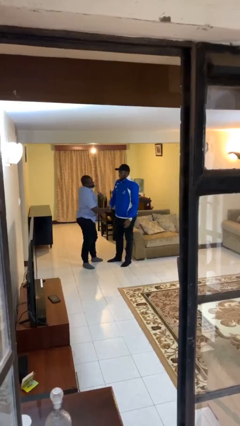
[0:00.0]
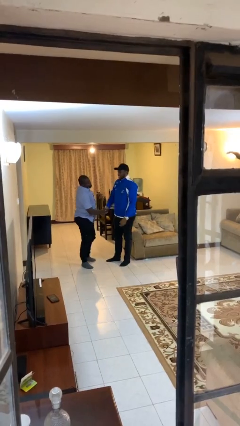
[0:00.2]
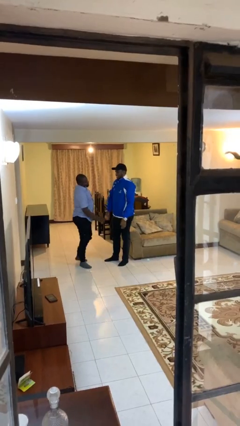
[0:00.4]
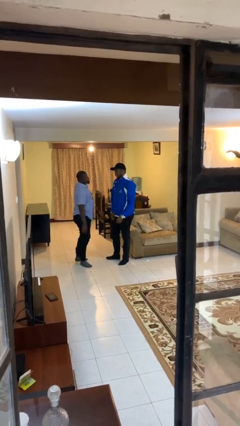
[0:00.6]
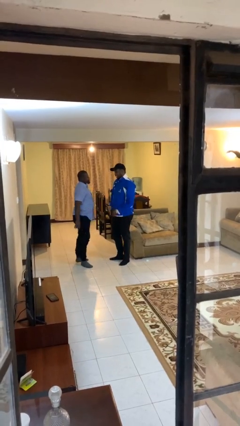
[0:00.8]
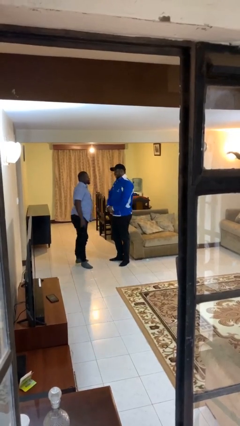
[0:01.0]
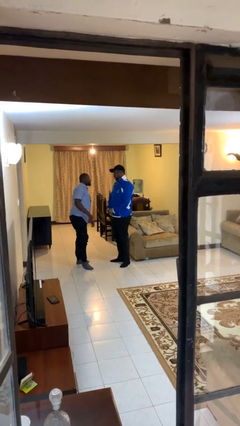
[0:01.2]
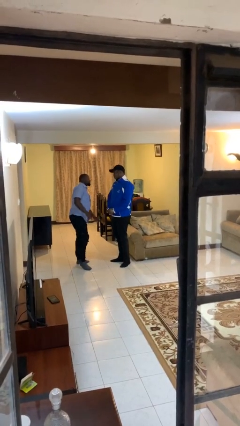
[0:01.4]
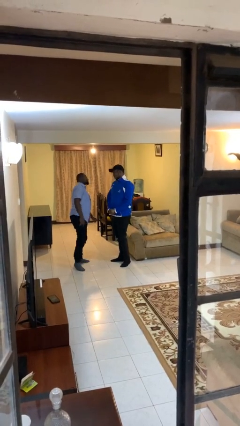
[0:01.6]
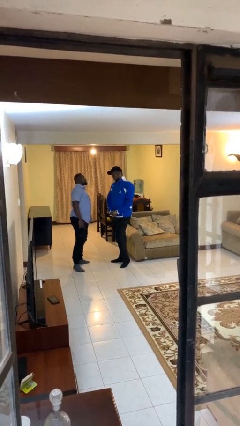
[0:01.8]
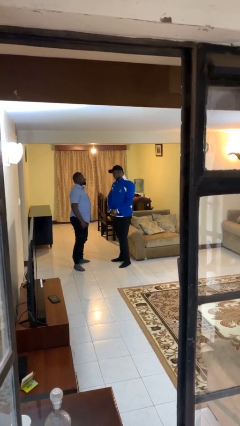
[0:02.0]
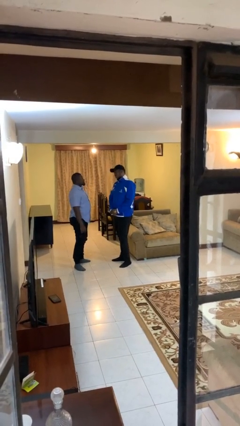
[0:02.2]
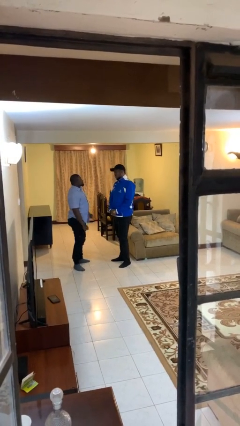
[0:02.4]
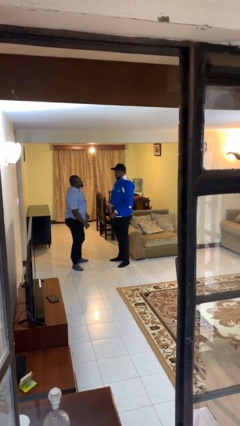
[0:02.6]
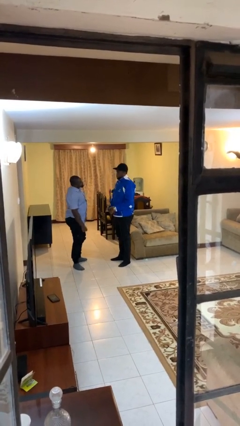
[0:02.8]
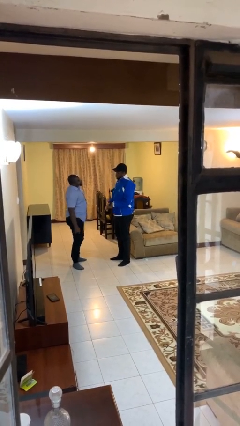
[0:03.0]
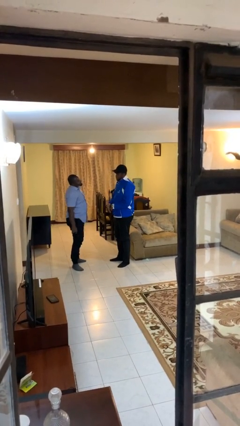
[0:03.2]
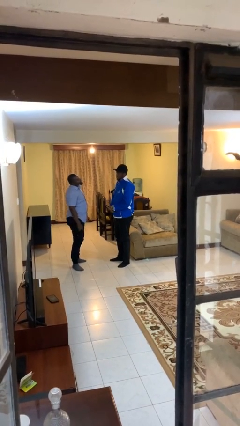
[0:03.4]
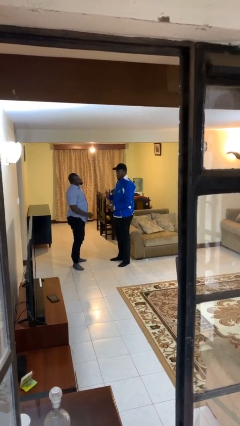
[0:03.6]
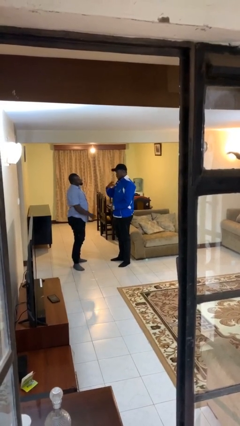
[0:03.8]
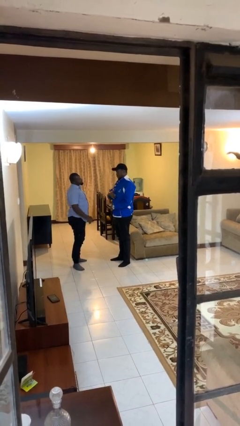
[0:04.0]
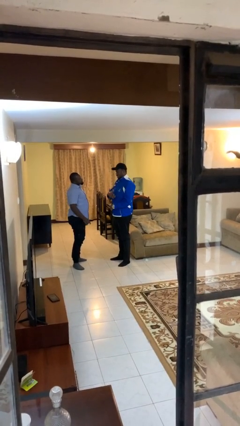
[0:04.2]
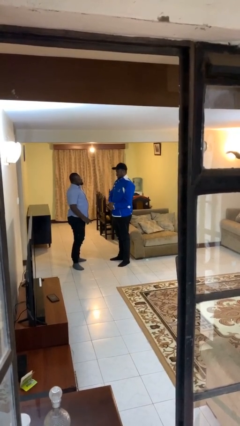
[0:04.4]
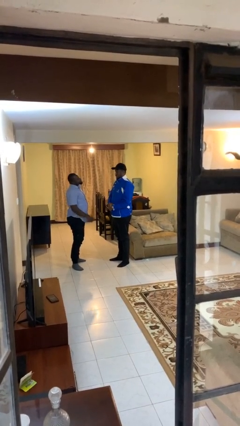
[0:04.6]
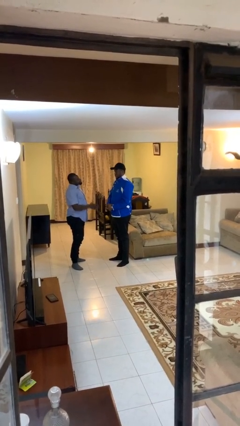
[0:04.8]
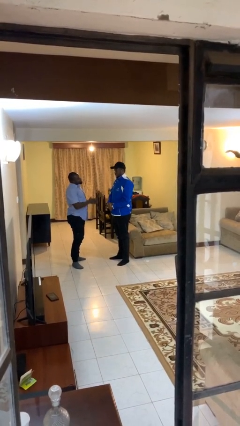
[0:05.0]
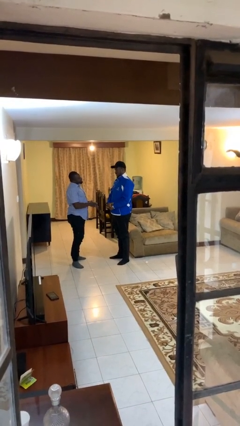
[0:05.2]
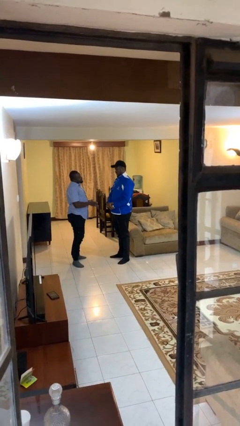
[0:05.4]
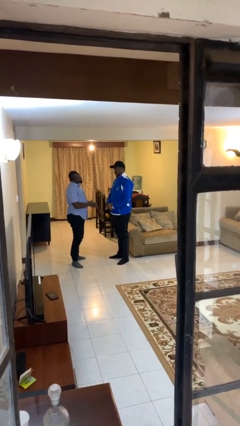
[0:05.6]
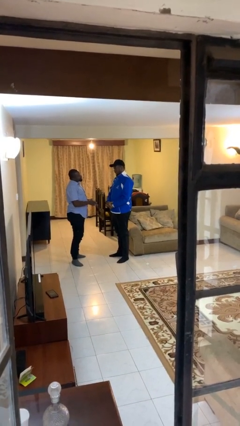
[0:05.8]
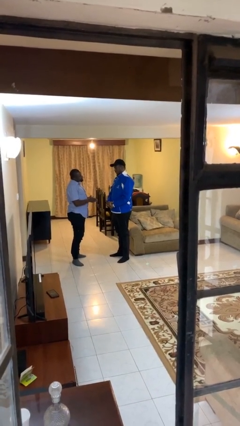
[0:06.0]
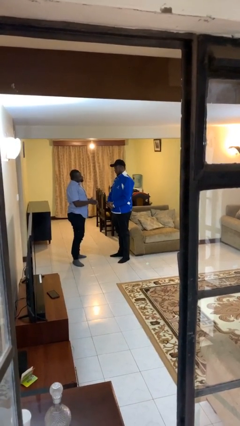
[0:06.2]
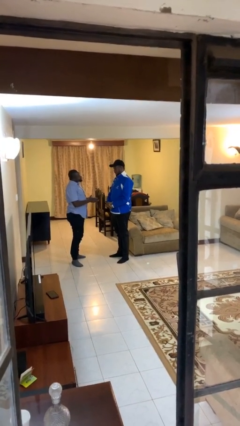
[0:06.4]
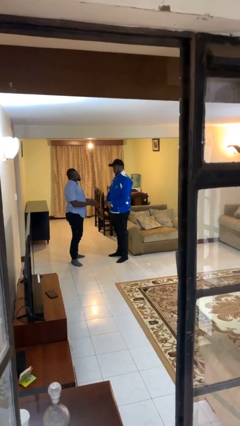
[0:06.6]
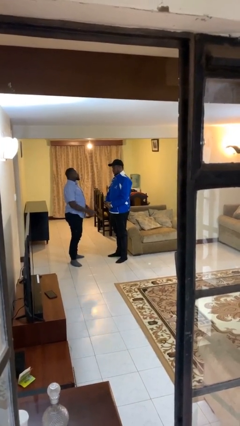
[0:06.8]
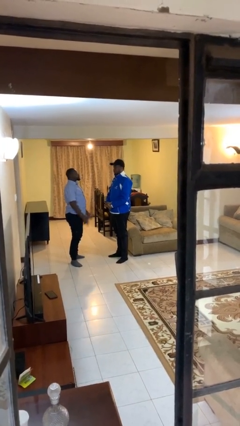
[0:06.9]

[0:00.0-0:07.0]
person talks to person

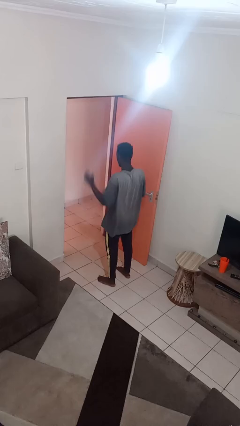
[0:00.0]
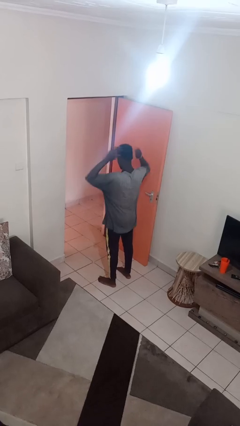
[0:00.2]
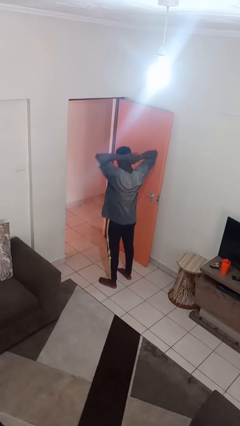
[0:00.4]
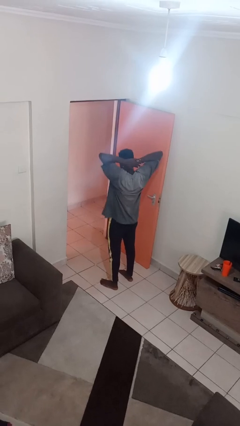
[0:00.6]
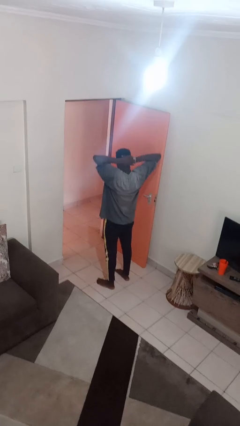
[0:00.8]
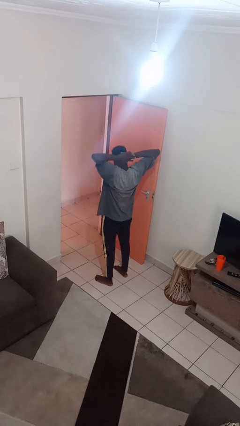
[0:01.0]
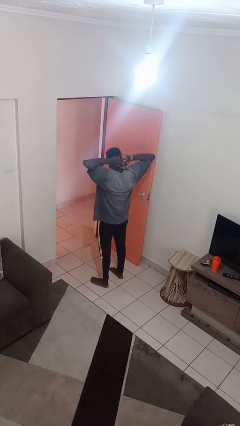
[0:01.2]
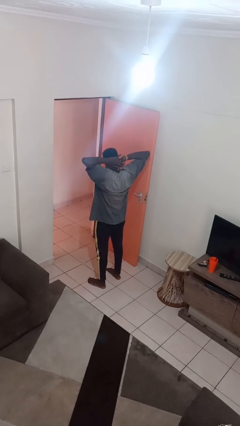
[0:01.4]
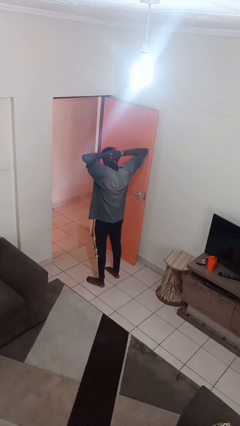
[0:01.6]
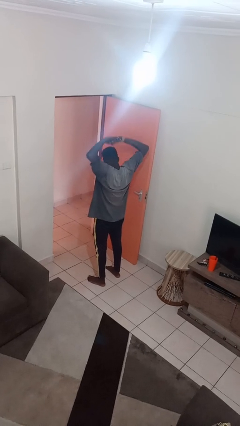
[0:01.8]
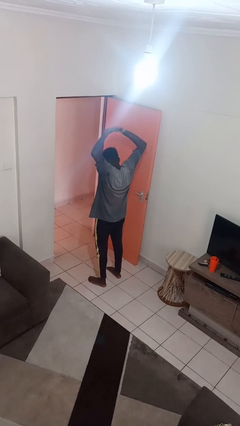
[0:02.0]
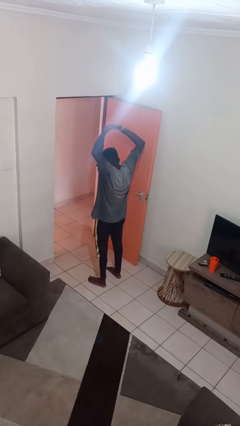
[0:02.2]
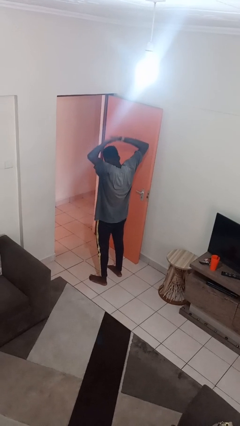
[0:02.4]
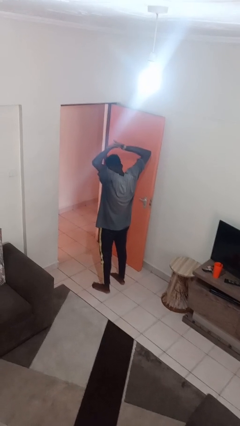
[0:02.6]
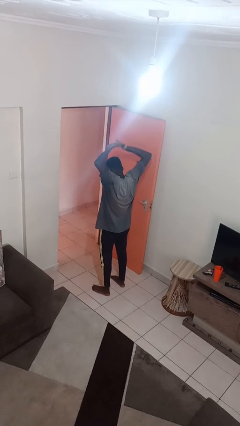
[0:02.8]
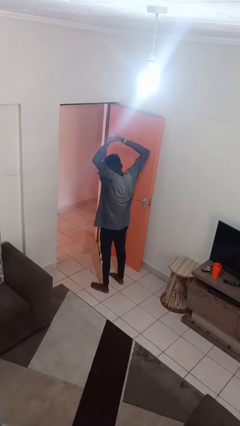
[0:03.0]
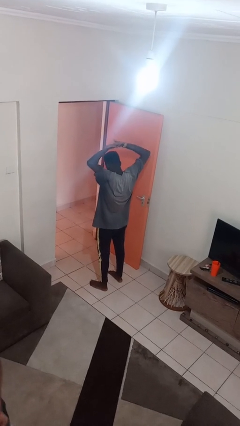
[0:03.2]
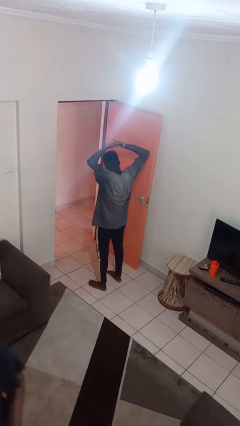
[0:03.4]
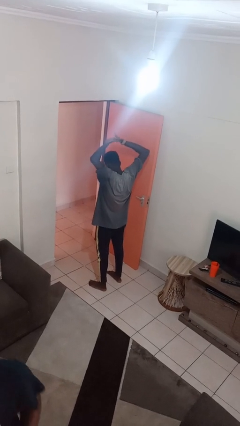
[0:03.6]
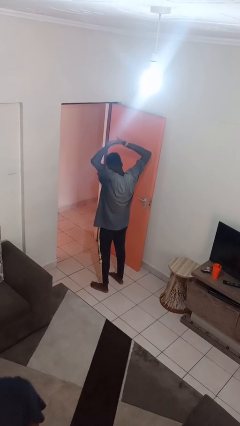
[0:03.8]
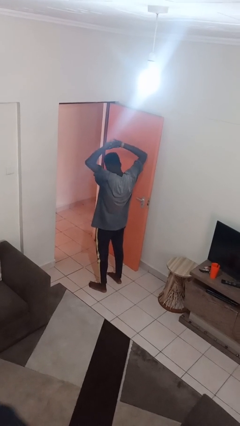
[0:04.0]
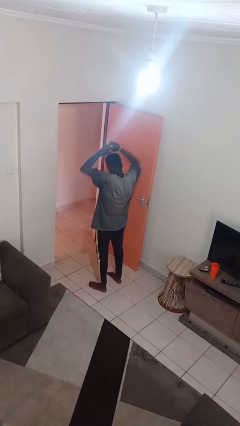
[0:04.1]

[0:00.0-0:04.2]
person stretches arms over head

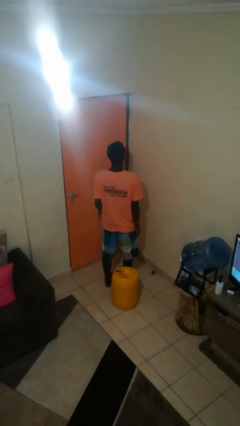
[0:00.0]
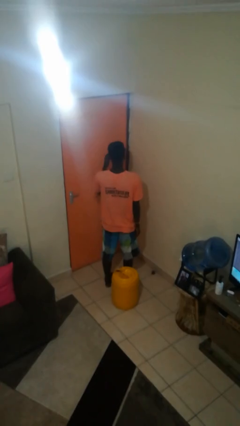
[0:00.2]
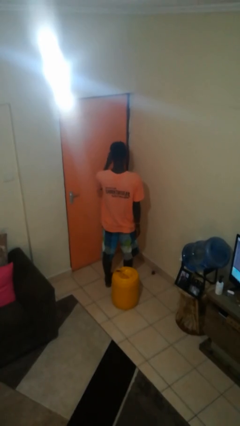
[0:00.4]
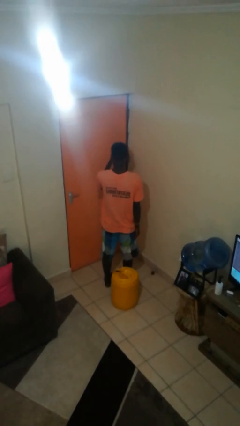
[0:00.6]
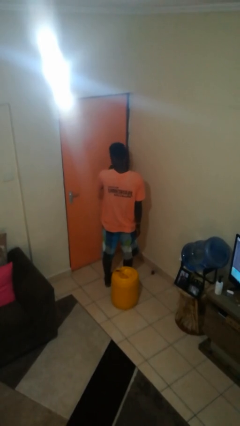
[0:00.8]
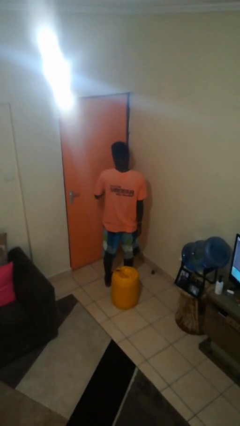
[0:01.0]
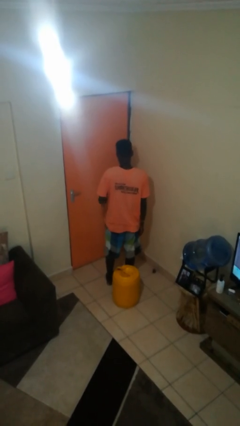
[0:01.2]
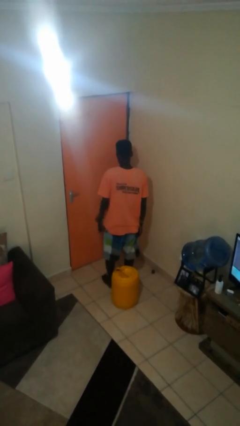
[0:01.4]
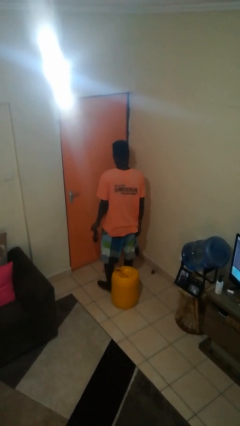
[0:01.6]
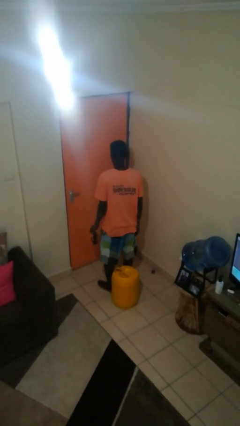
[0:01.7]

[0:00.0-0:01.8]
person takes off sunglasses

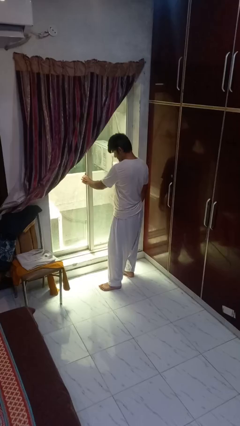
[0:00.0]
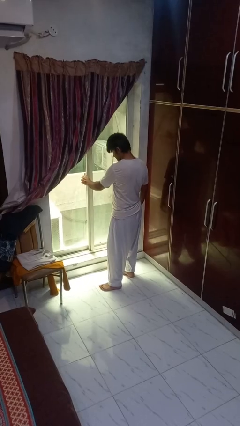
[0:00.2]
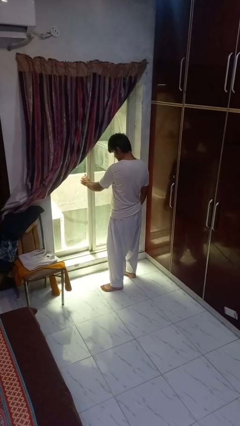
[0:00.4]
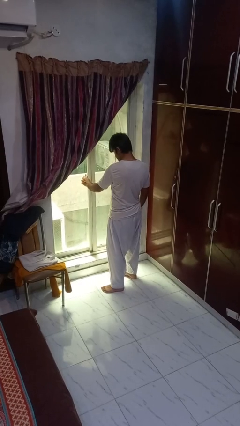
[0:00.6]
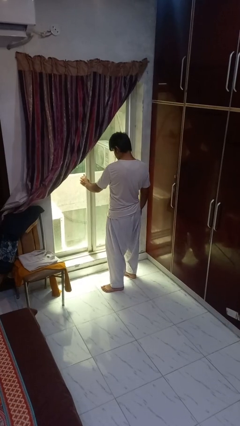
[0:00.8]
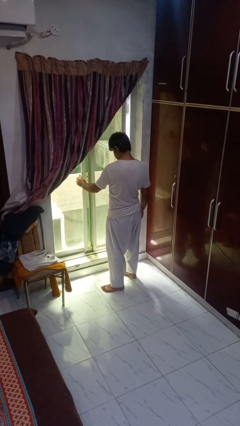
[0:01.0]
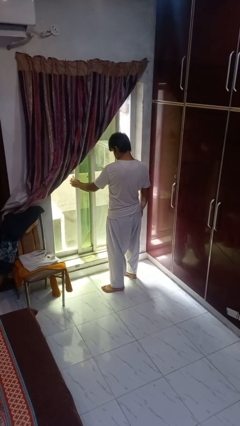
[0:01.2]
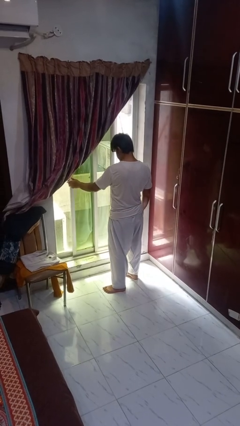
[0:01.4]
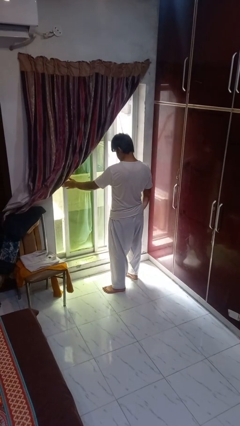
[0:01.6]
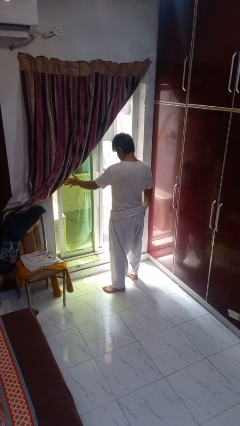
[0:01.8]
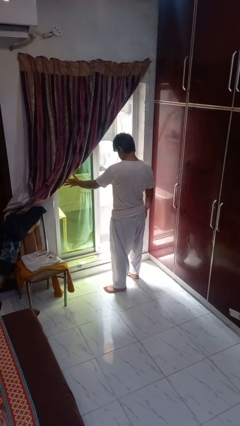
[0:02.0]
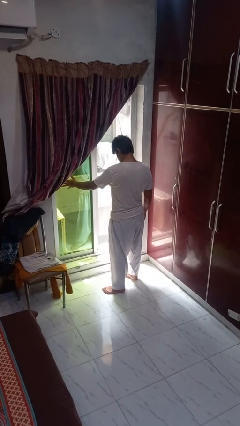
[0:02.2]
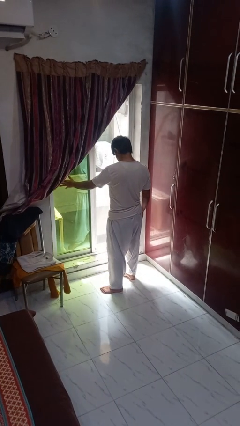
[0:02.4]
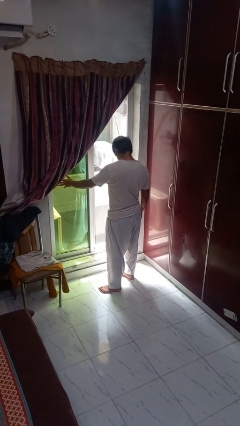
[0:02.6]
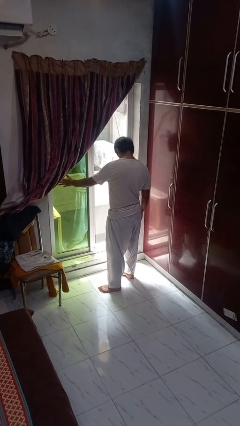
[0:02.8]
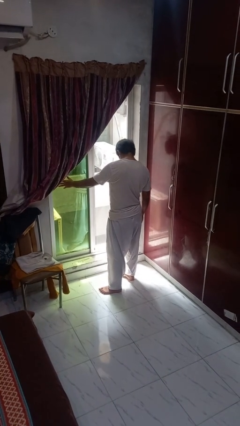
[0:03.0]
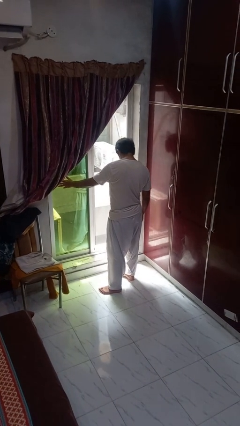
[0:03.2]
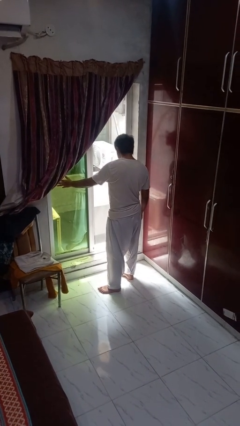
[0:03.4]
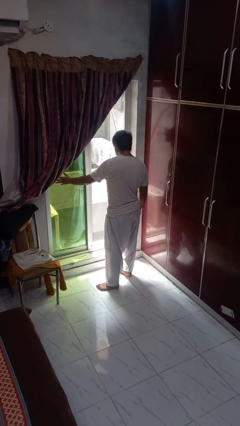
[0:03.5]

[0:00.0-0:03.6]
person opens home window

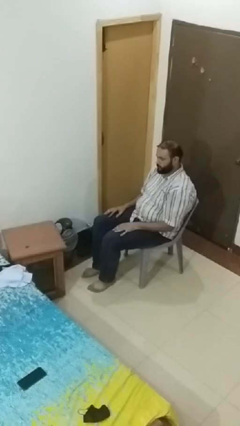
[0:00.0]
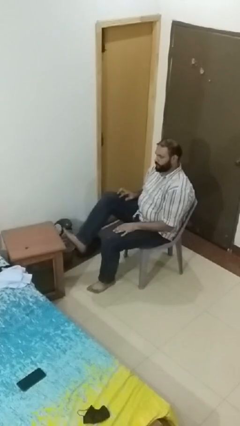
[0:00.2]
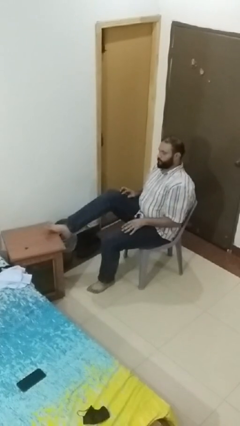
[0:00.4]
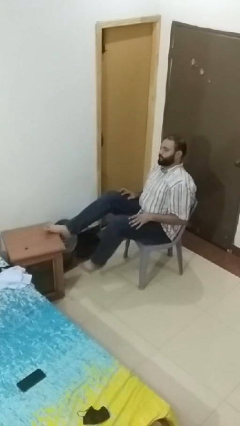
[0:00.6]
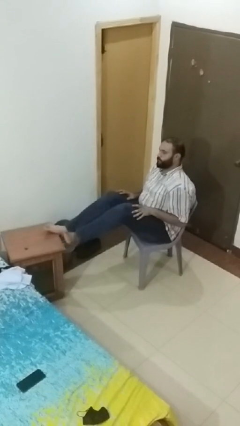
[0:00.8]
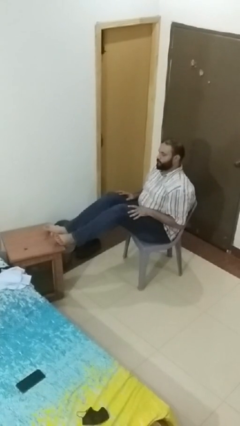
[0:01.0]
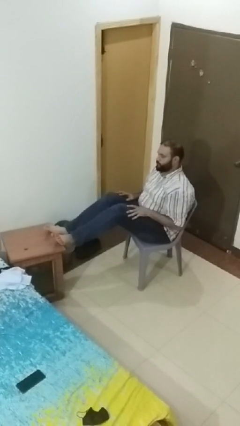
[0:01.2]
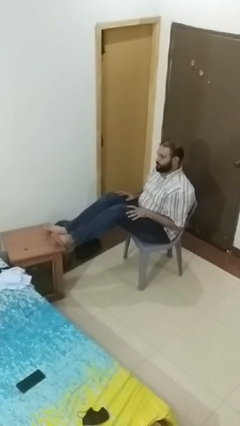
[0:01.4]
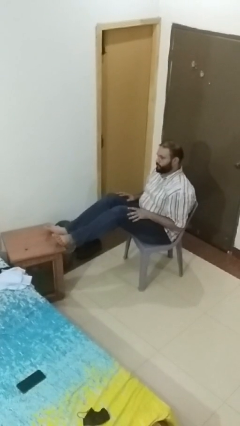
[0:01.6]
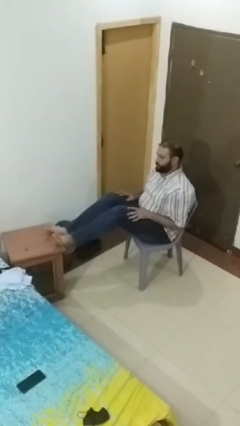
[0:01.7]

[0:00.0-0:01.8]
person puts feet up
